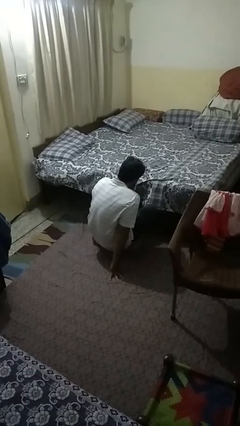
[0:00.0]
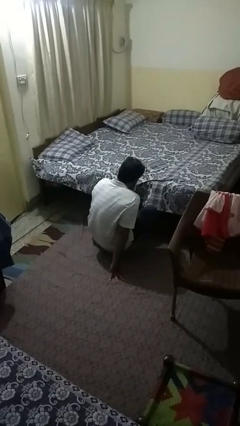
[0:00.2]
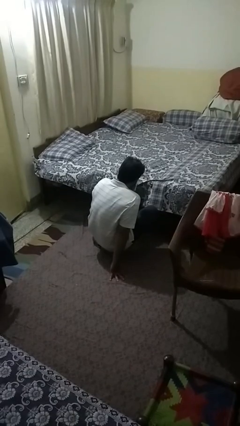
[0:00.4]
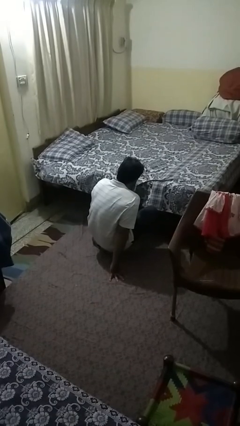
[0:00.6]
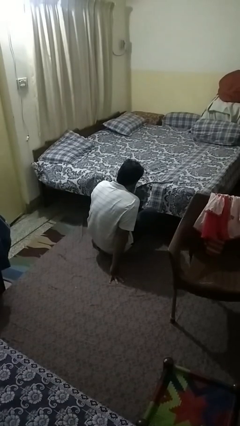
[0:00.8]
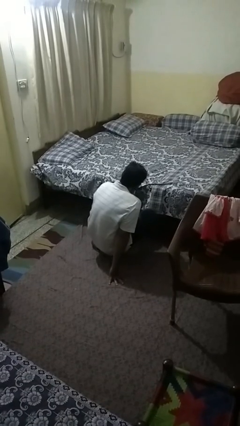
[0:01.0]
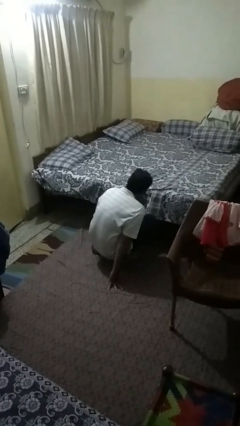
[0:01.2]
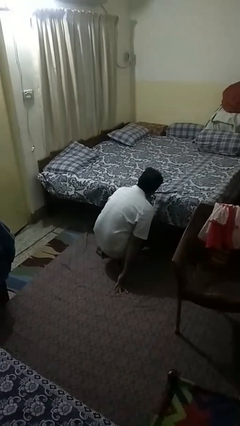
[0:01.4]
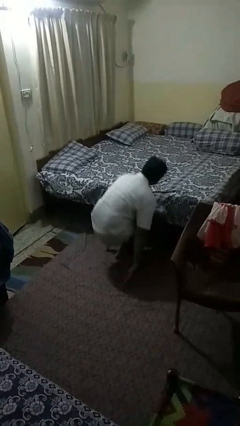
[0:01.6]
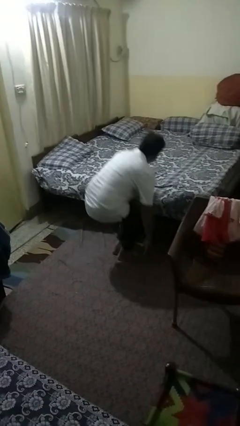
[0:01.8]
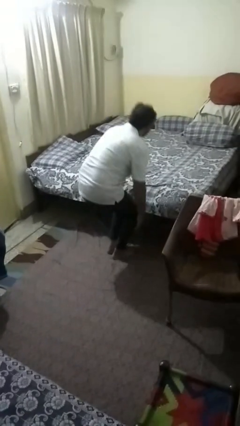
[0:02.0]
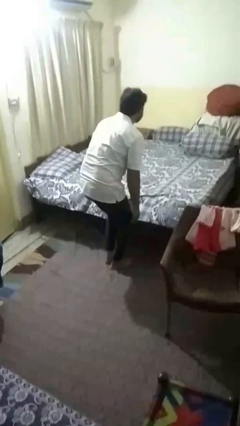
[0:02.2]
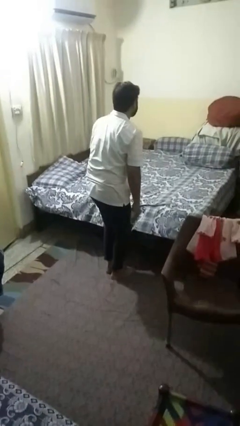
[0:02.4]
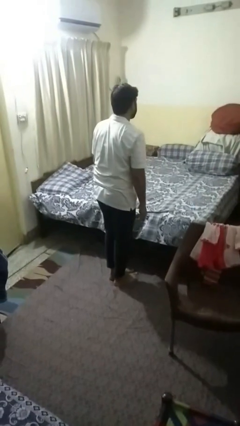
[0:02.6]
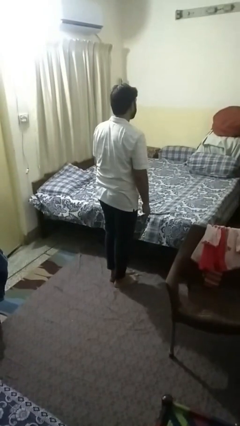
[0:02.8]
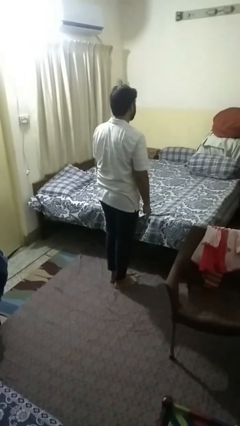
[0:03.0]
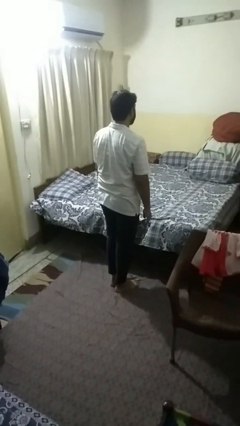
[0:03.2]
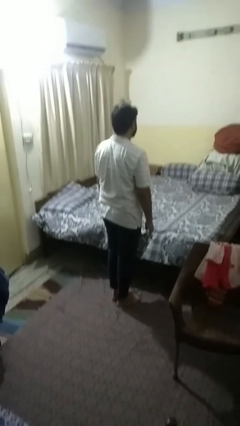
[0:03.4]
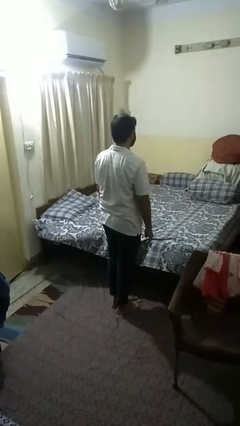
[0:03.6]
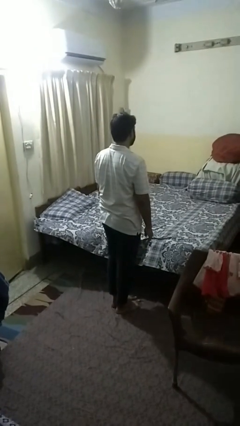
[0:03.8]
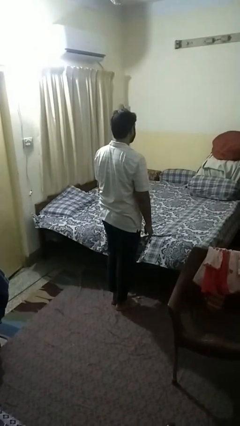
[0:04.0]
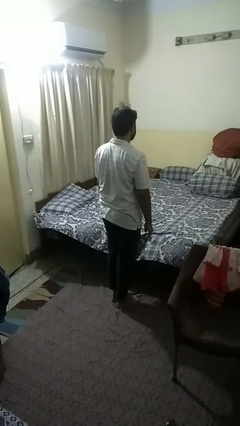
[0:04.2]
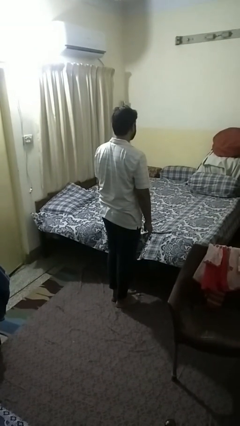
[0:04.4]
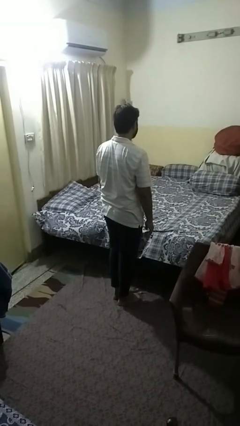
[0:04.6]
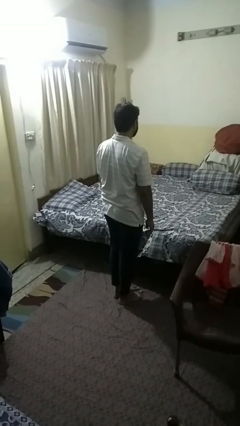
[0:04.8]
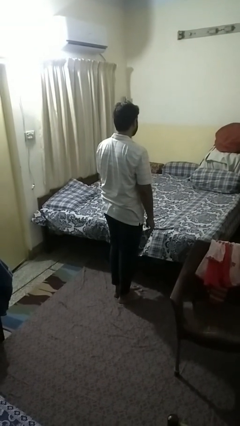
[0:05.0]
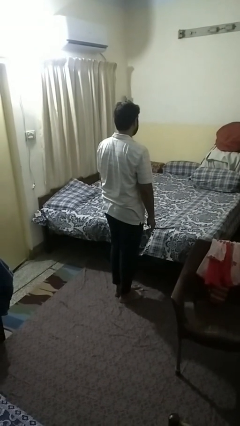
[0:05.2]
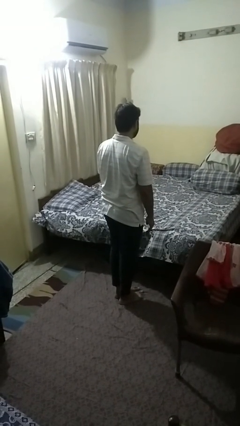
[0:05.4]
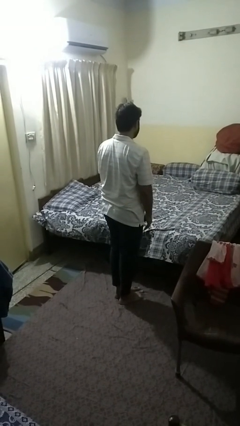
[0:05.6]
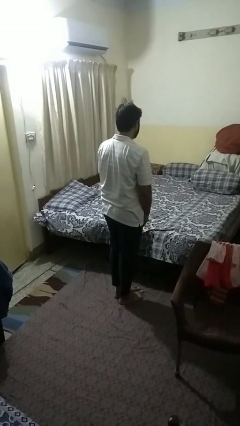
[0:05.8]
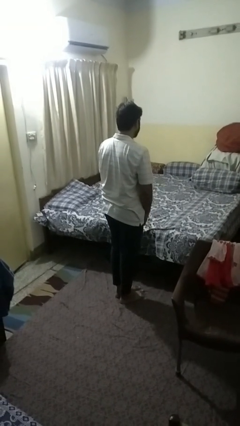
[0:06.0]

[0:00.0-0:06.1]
person stands up from floor

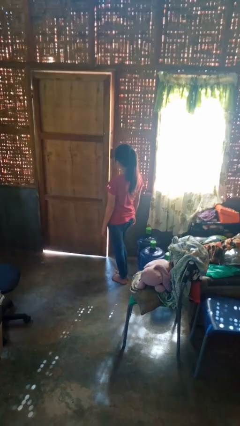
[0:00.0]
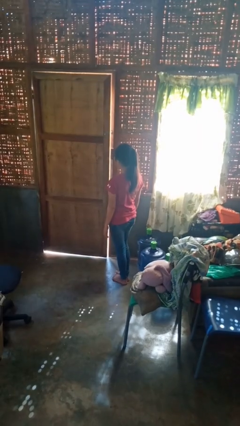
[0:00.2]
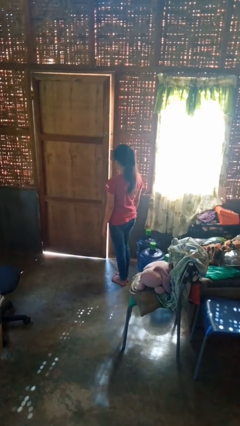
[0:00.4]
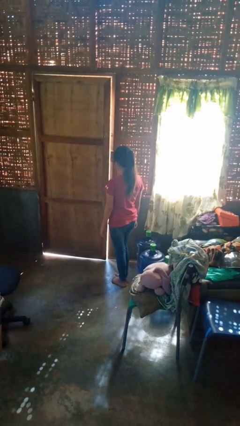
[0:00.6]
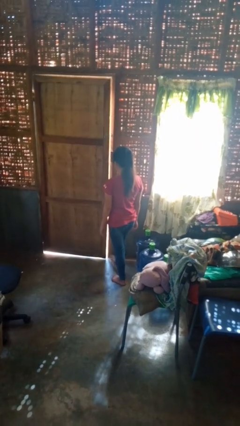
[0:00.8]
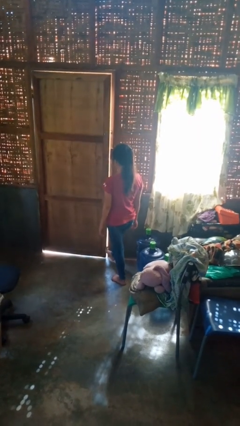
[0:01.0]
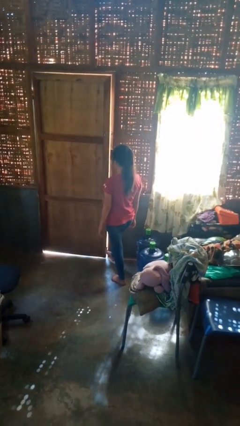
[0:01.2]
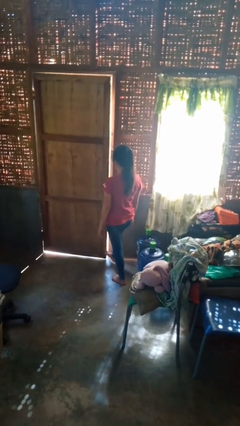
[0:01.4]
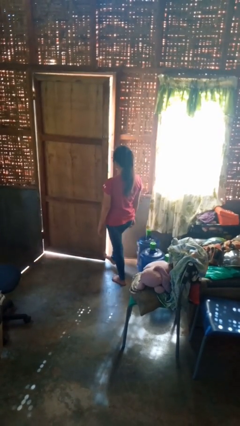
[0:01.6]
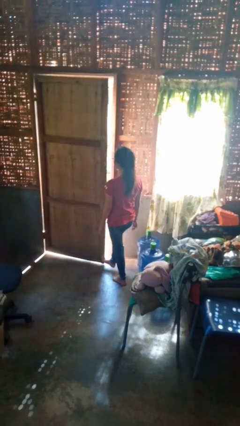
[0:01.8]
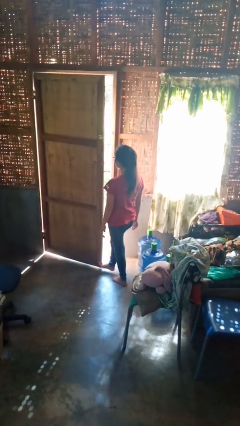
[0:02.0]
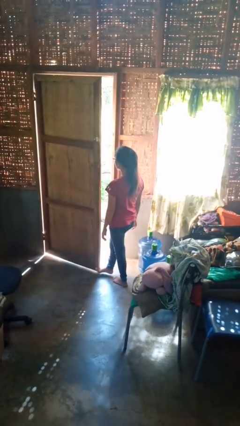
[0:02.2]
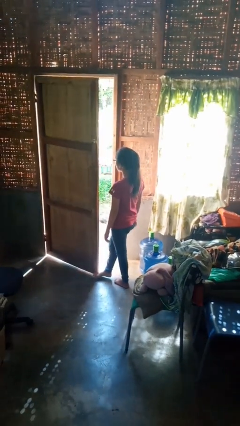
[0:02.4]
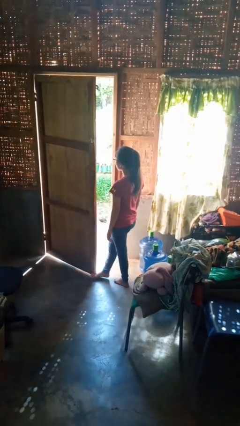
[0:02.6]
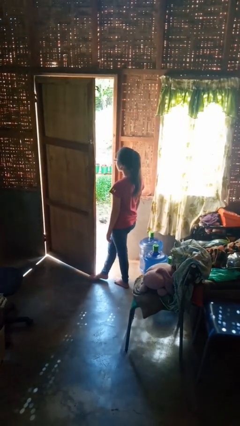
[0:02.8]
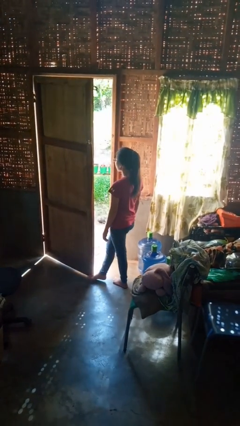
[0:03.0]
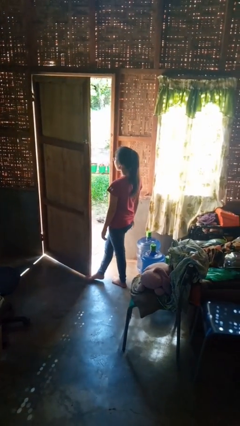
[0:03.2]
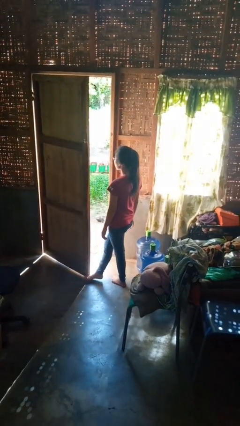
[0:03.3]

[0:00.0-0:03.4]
person opens facility door

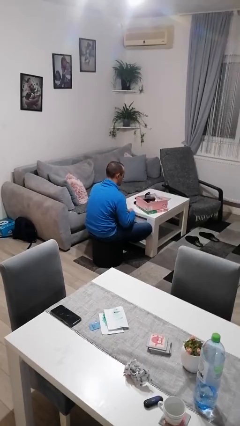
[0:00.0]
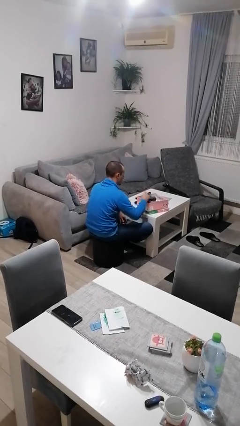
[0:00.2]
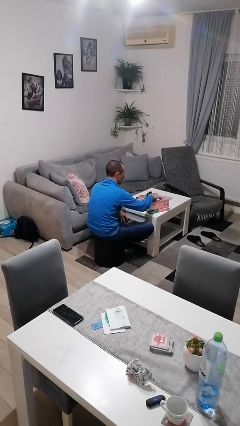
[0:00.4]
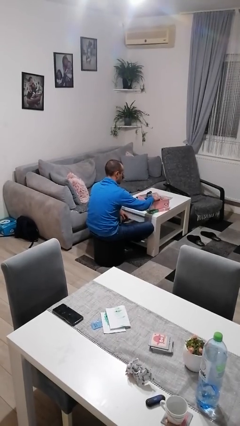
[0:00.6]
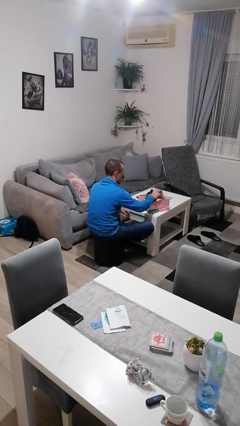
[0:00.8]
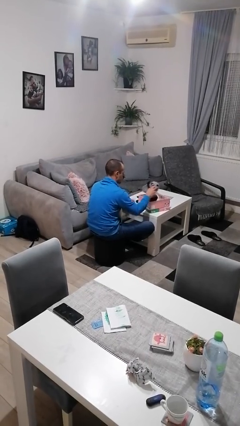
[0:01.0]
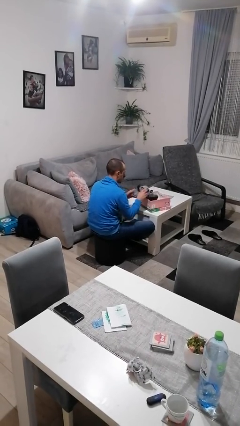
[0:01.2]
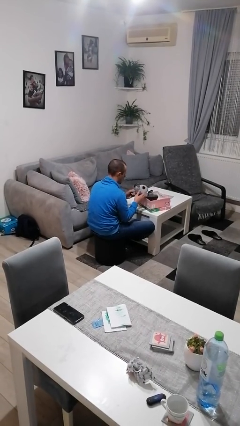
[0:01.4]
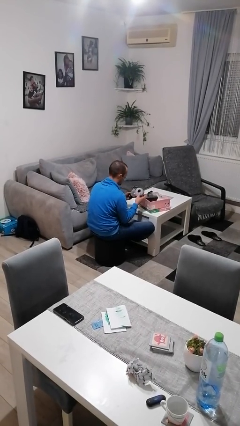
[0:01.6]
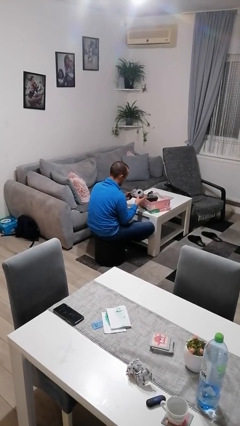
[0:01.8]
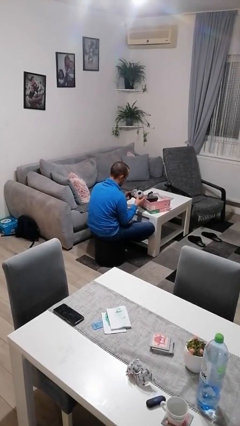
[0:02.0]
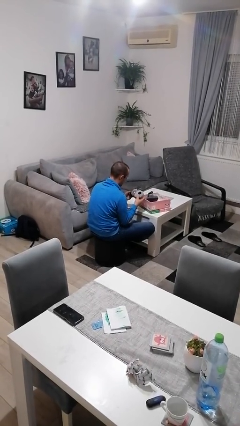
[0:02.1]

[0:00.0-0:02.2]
person takes object from box

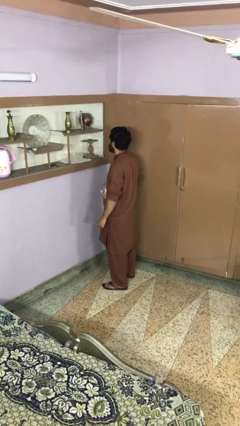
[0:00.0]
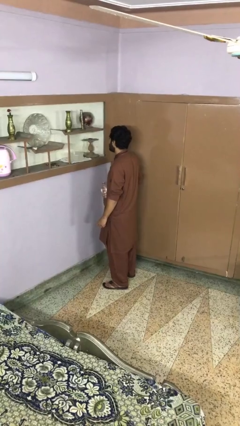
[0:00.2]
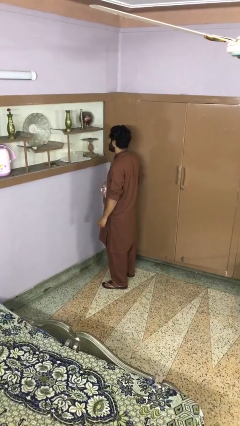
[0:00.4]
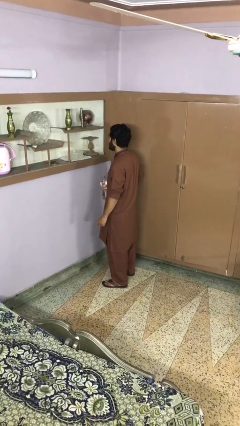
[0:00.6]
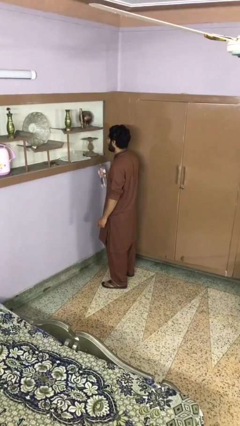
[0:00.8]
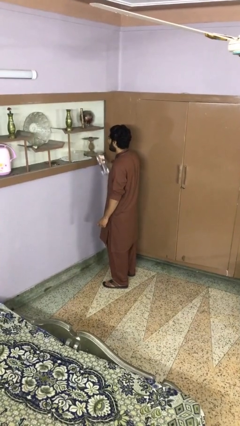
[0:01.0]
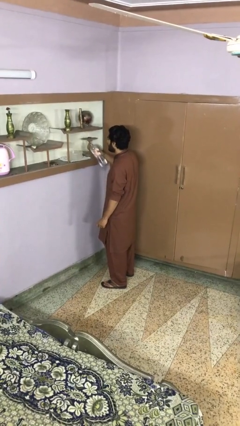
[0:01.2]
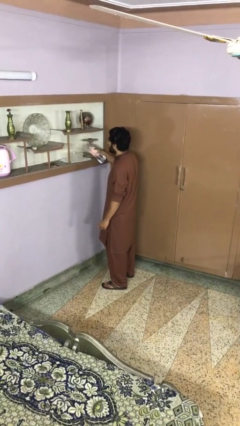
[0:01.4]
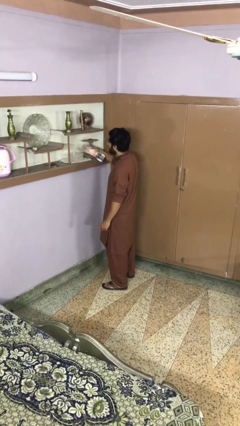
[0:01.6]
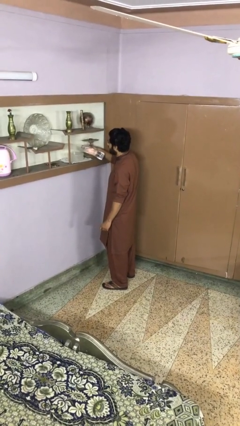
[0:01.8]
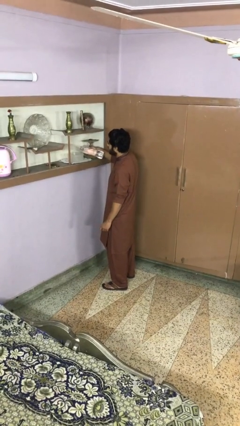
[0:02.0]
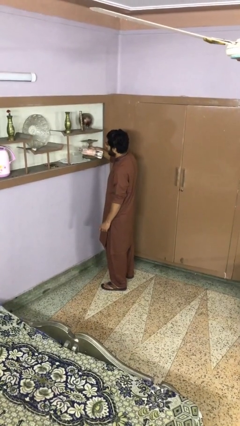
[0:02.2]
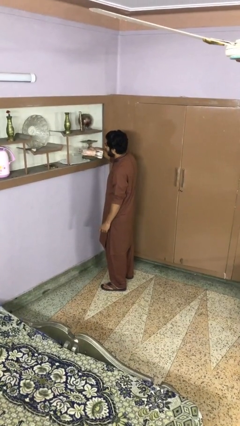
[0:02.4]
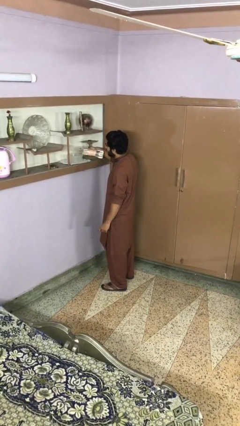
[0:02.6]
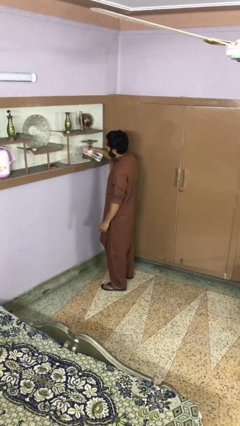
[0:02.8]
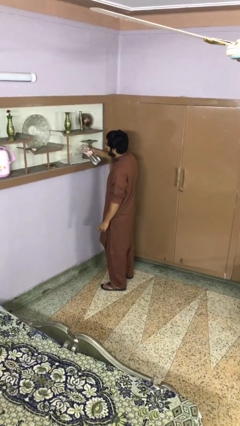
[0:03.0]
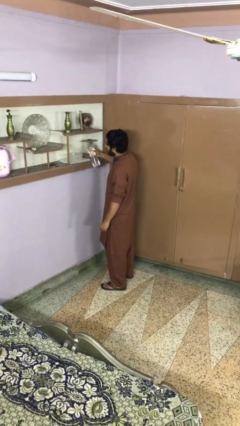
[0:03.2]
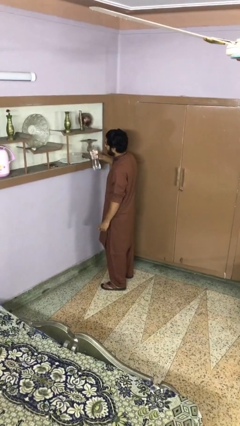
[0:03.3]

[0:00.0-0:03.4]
person pours into bowl

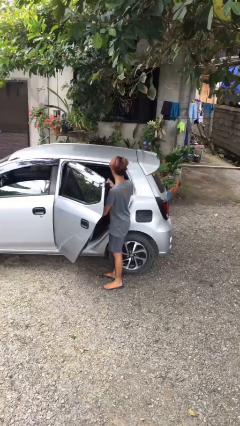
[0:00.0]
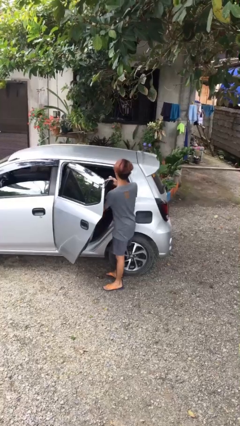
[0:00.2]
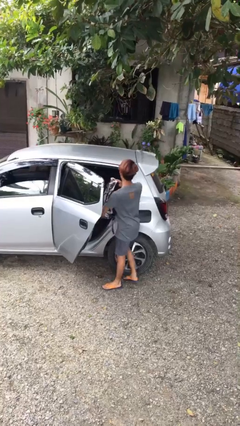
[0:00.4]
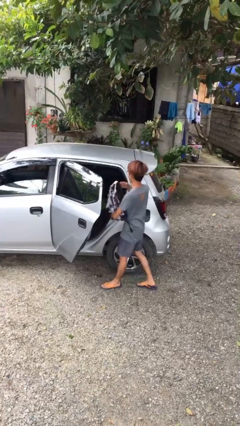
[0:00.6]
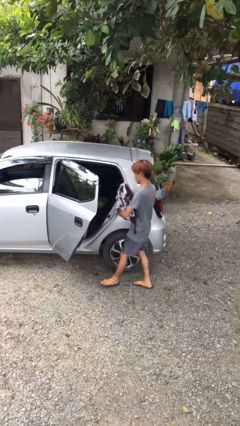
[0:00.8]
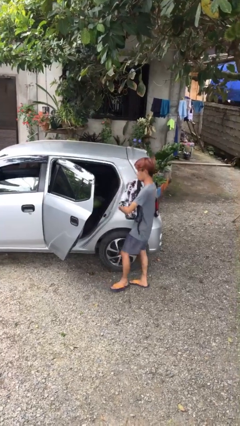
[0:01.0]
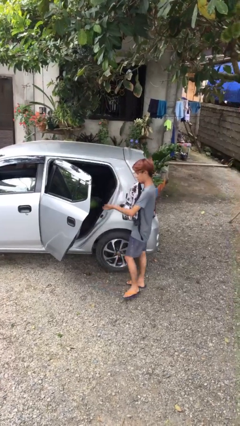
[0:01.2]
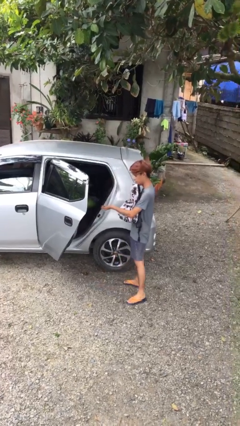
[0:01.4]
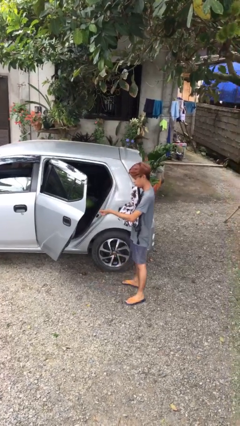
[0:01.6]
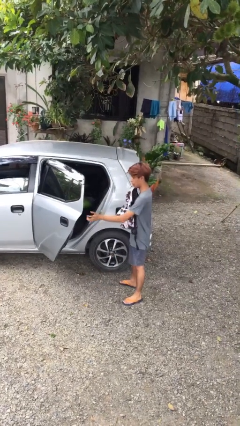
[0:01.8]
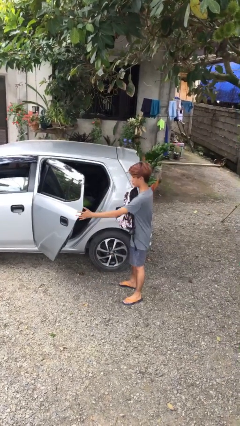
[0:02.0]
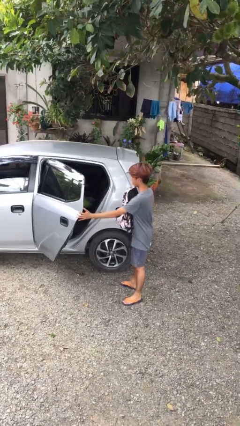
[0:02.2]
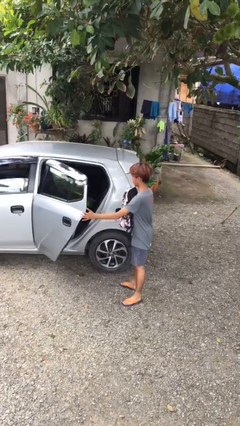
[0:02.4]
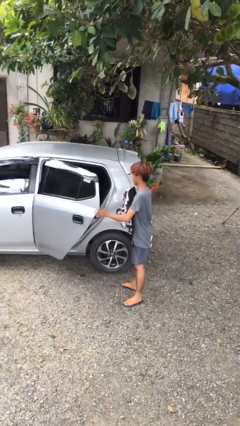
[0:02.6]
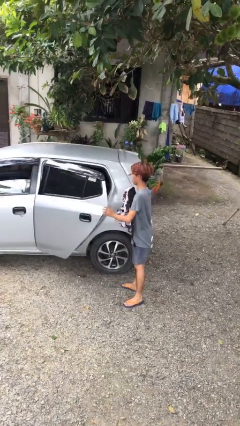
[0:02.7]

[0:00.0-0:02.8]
person unloads car
